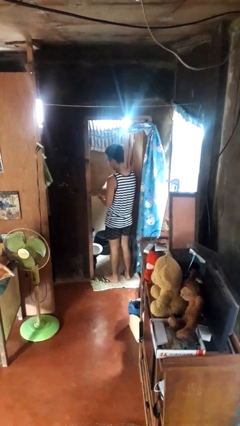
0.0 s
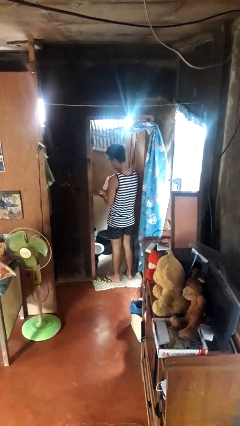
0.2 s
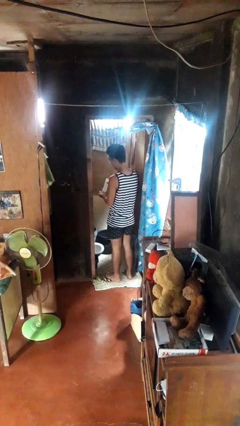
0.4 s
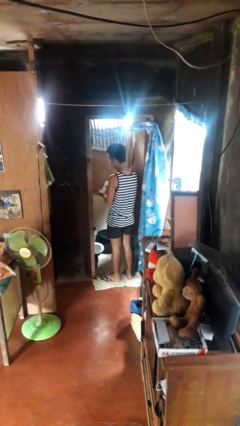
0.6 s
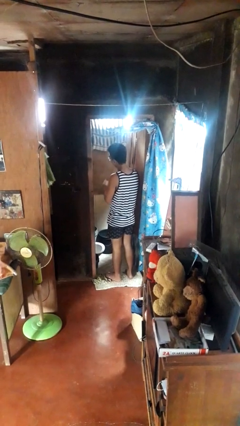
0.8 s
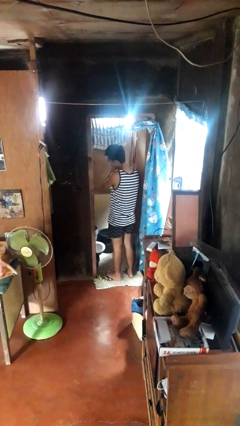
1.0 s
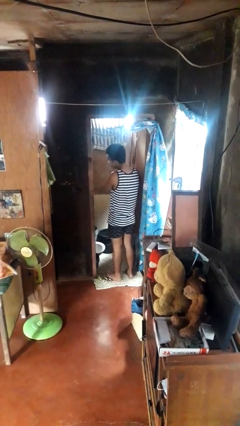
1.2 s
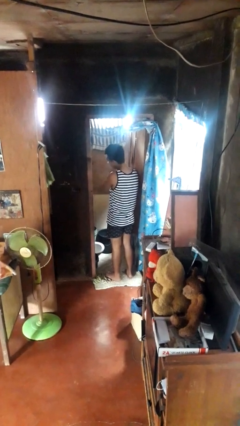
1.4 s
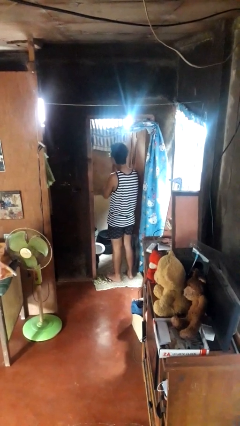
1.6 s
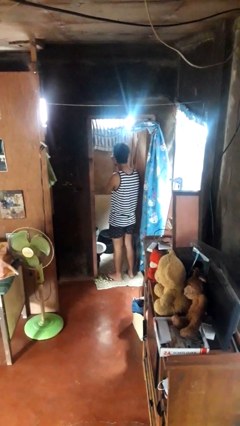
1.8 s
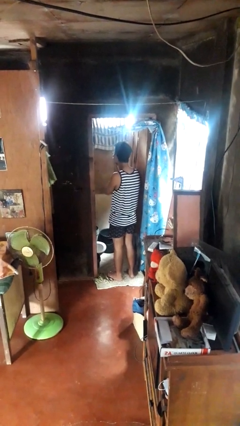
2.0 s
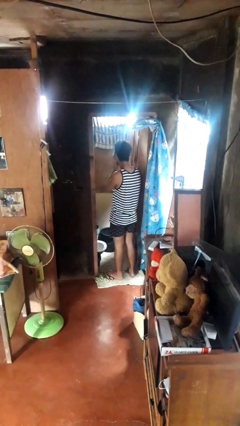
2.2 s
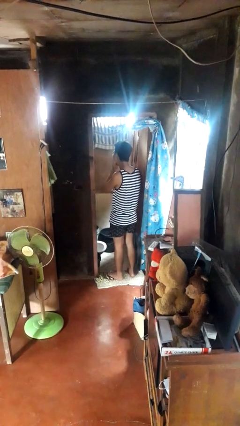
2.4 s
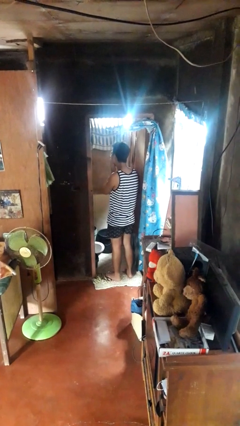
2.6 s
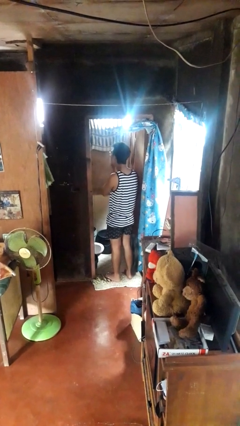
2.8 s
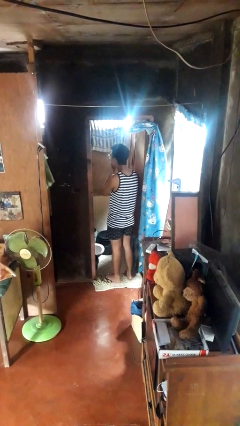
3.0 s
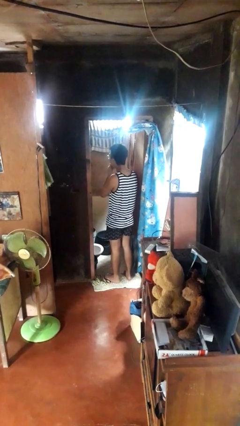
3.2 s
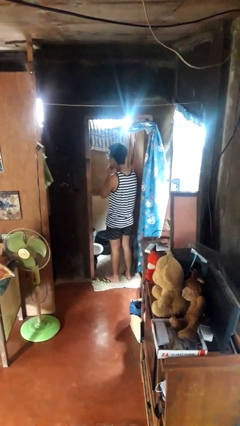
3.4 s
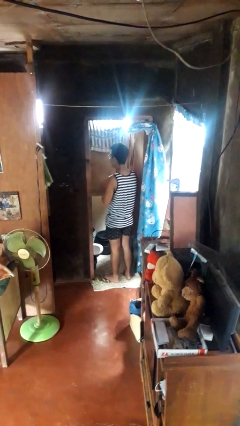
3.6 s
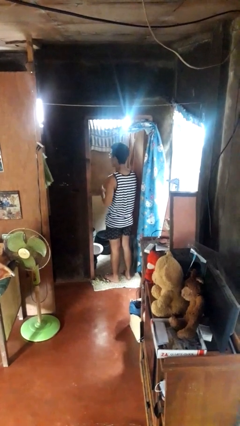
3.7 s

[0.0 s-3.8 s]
person applies facial moisturizer

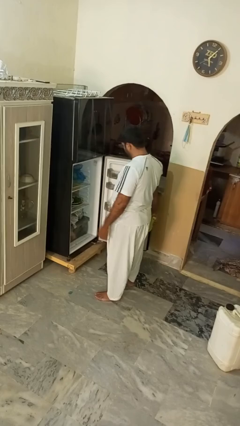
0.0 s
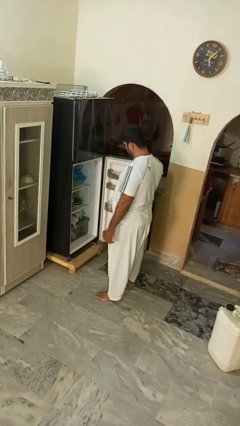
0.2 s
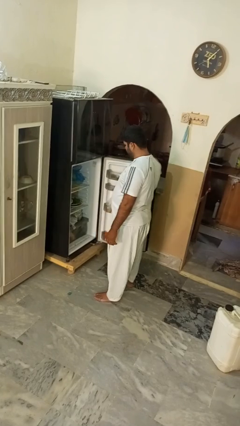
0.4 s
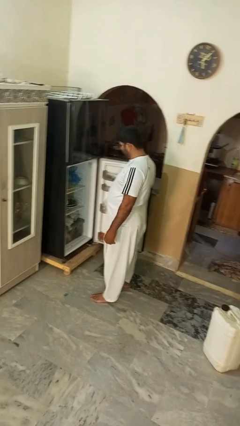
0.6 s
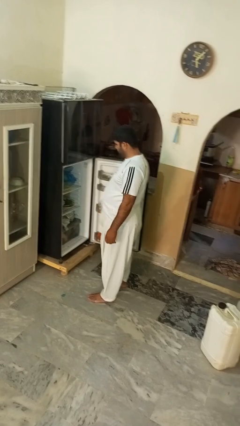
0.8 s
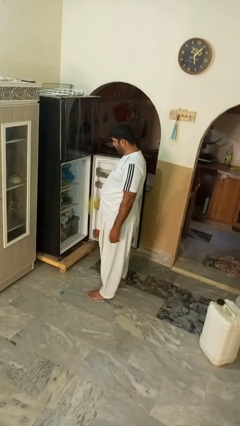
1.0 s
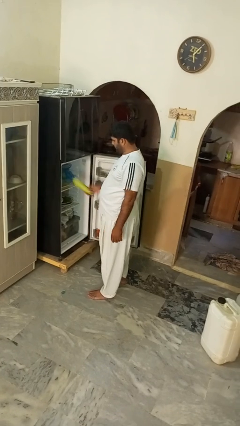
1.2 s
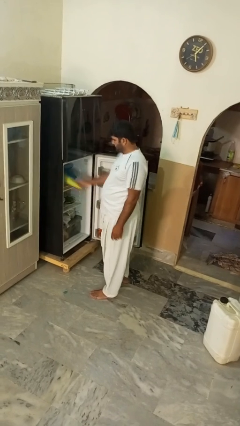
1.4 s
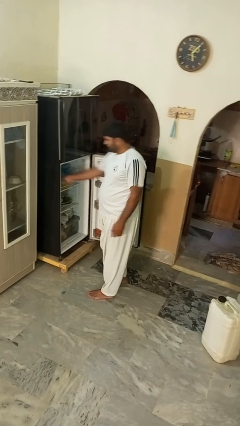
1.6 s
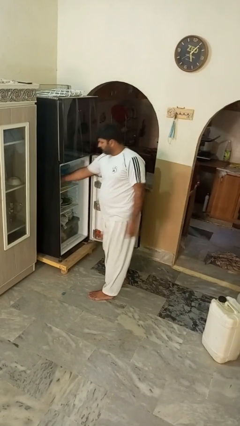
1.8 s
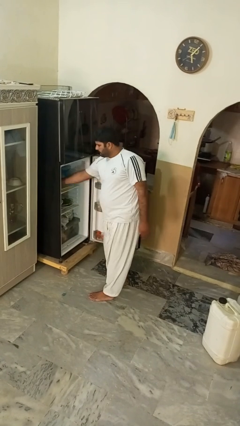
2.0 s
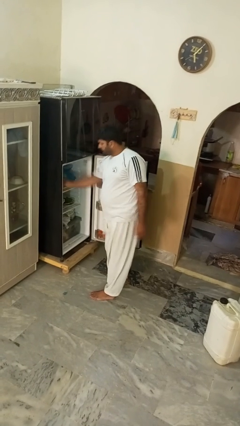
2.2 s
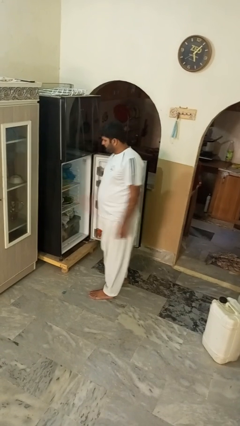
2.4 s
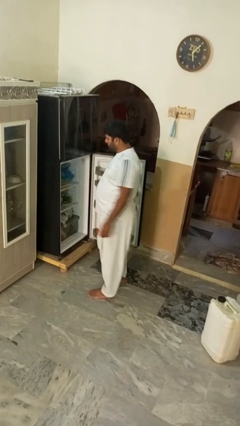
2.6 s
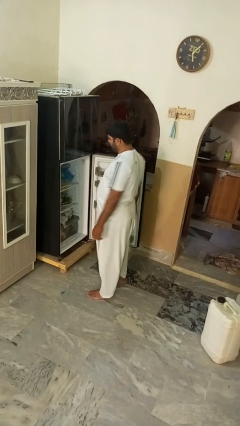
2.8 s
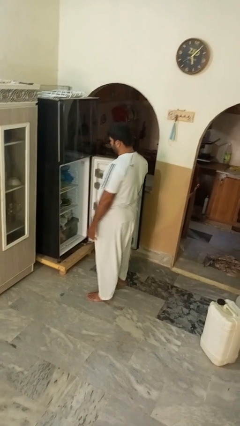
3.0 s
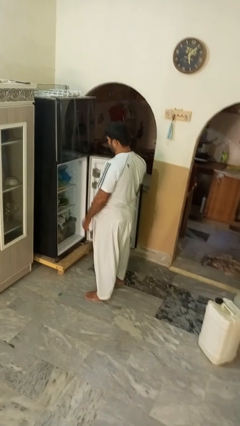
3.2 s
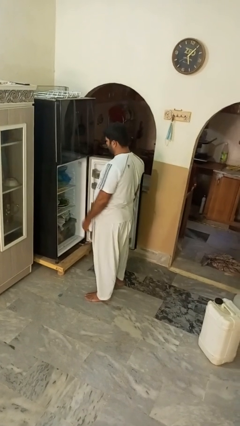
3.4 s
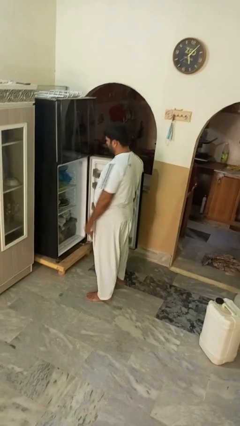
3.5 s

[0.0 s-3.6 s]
person puts object into refrigerator

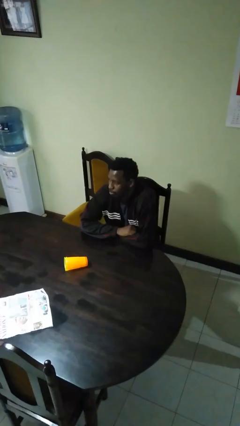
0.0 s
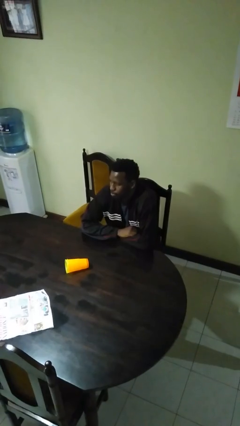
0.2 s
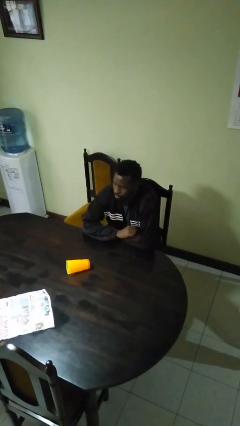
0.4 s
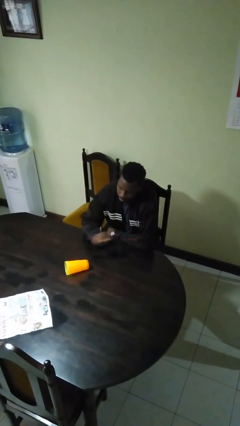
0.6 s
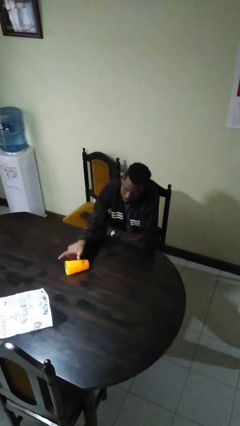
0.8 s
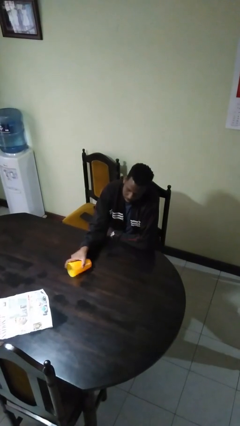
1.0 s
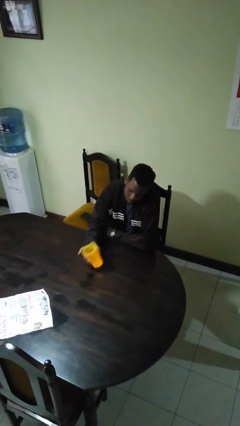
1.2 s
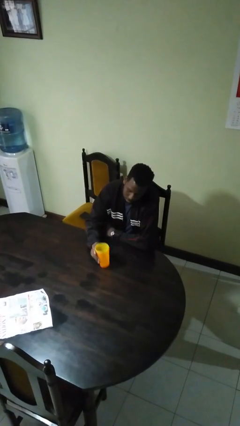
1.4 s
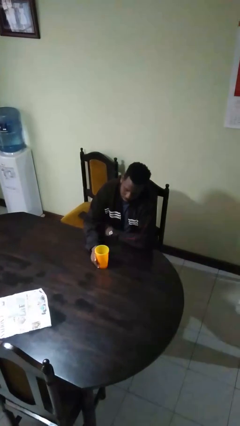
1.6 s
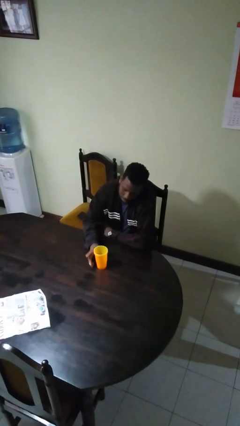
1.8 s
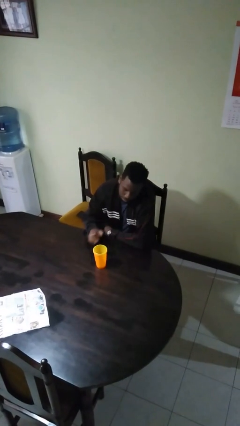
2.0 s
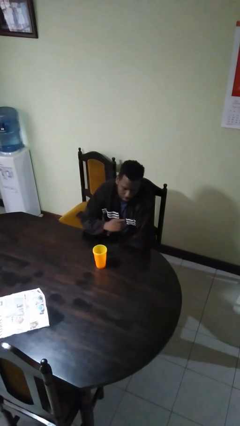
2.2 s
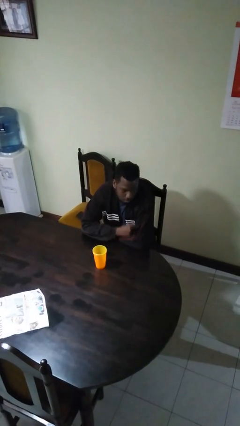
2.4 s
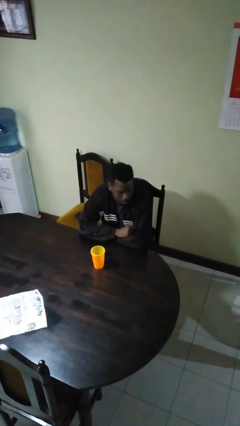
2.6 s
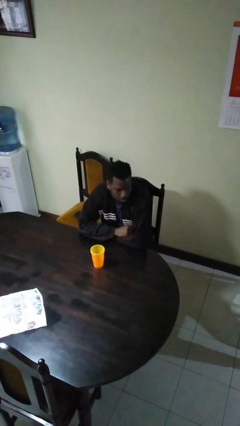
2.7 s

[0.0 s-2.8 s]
person sets upright glass

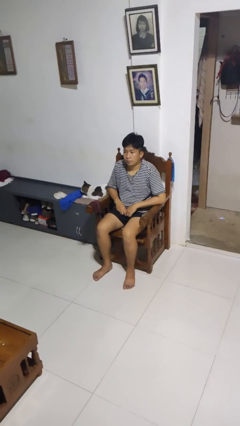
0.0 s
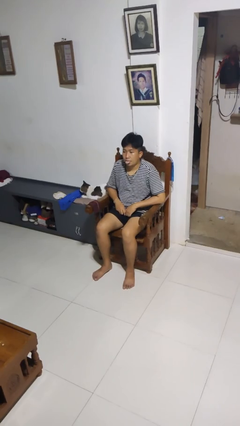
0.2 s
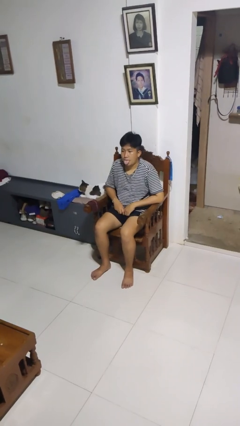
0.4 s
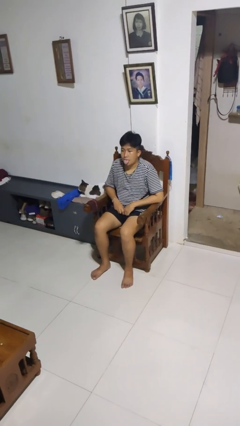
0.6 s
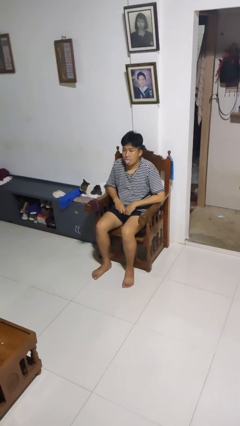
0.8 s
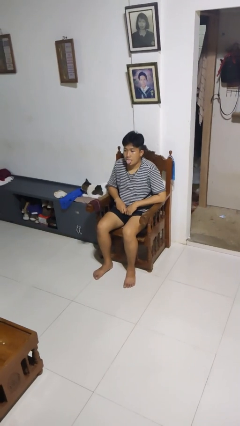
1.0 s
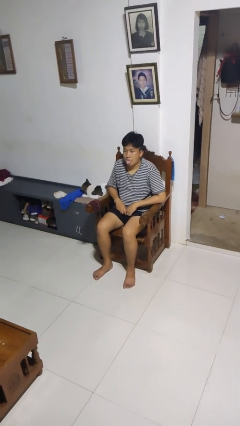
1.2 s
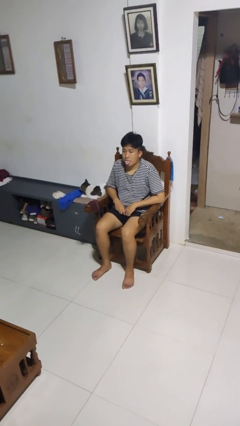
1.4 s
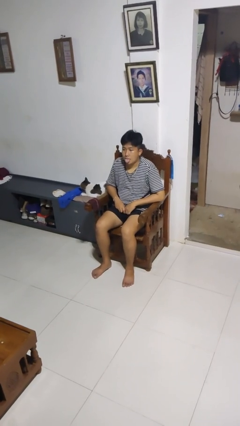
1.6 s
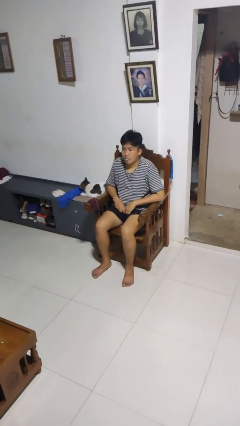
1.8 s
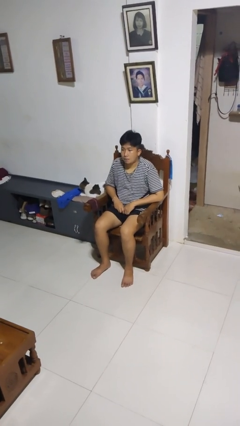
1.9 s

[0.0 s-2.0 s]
person sticks out tongue

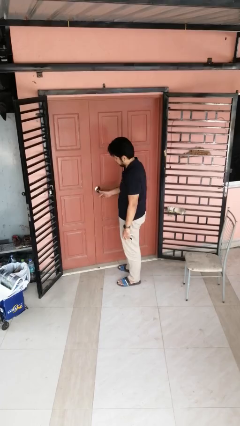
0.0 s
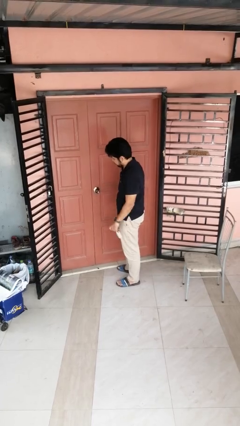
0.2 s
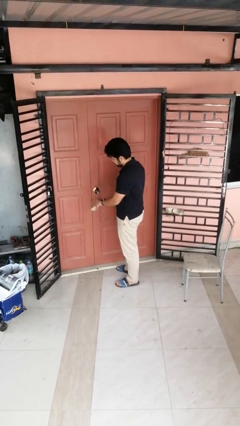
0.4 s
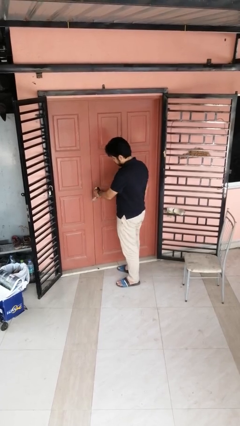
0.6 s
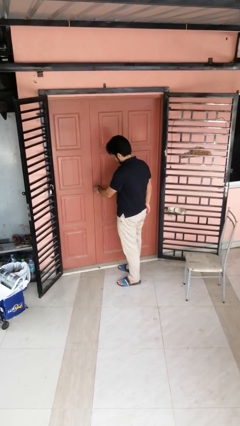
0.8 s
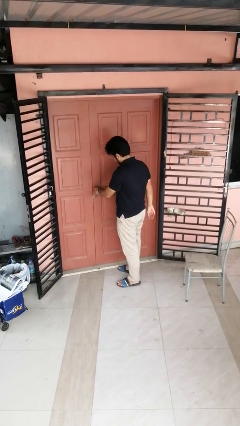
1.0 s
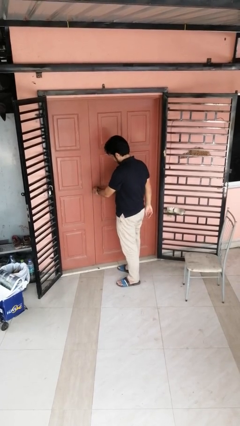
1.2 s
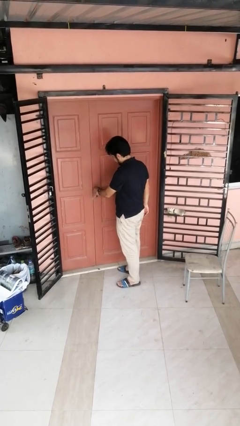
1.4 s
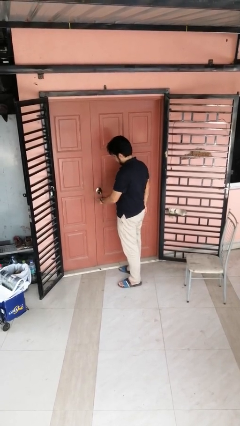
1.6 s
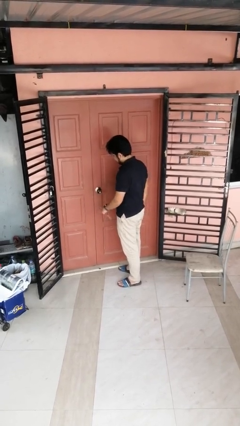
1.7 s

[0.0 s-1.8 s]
person locks door with keys

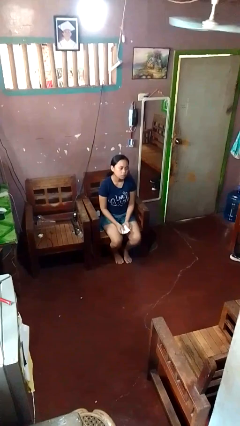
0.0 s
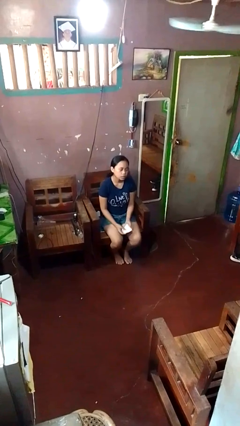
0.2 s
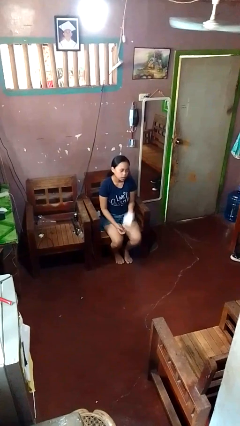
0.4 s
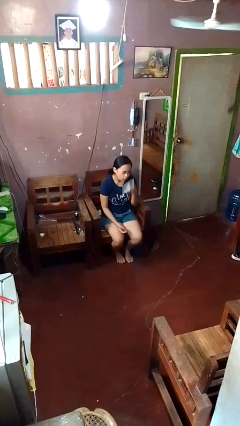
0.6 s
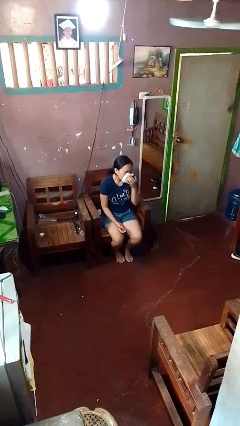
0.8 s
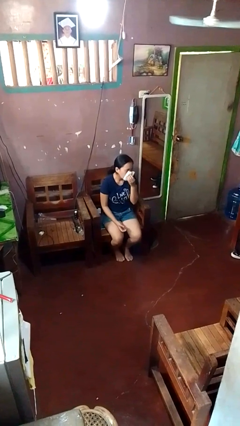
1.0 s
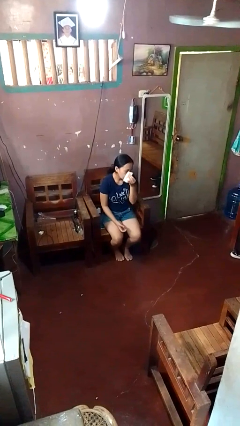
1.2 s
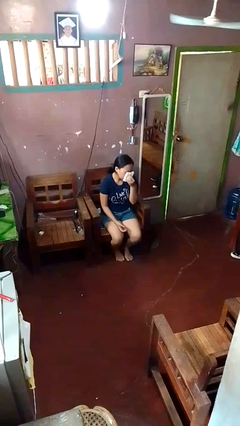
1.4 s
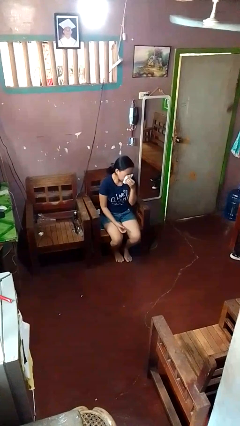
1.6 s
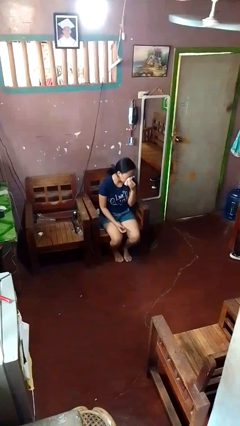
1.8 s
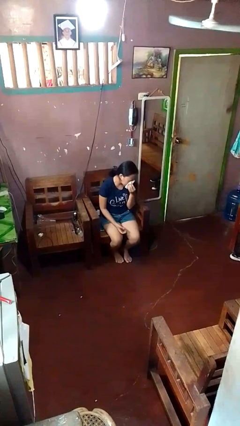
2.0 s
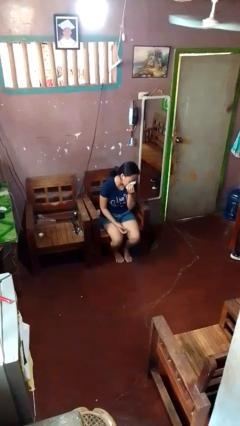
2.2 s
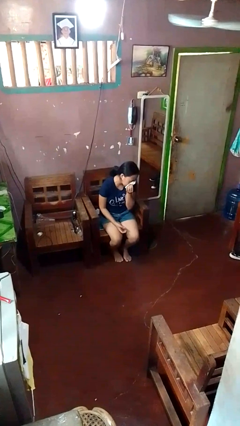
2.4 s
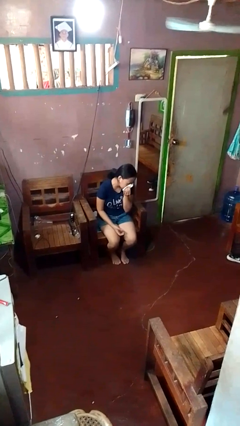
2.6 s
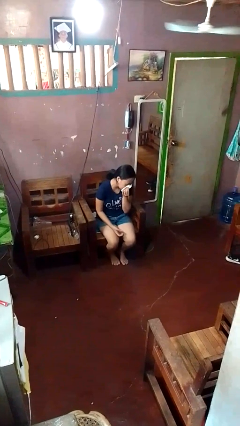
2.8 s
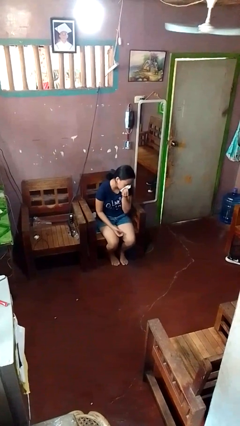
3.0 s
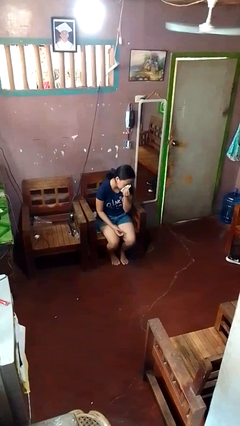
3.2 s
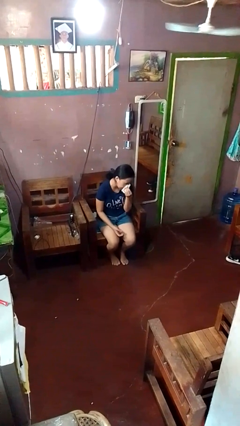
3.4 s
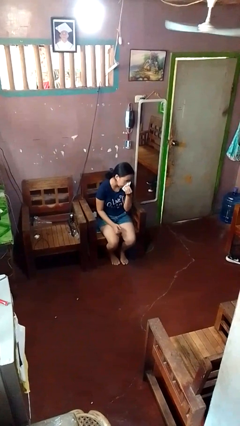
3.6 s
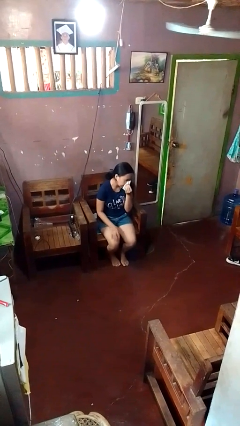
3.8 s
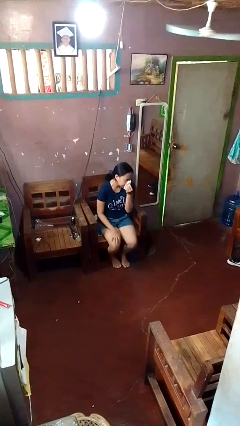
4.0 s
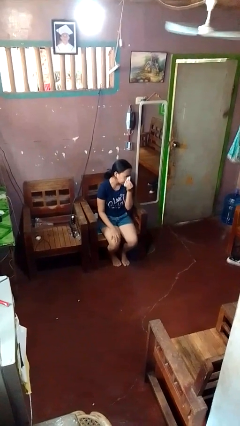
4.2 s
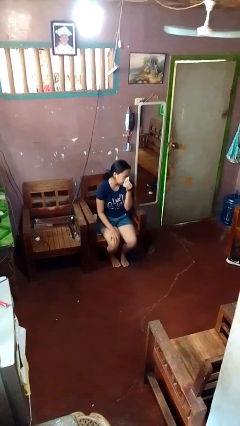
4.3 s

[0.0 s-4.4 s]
person blows nose
